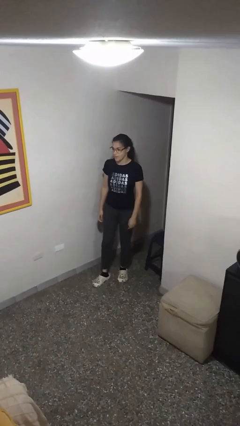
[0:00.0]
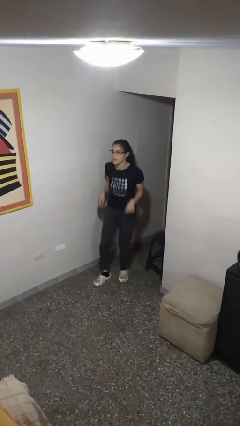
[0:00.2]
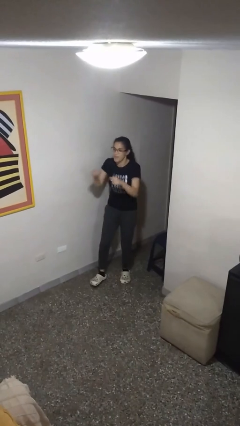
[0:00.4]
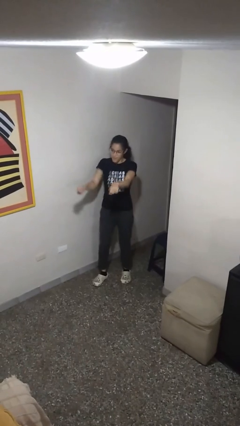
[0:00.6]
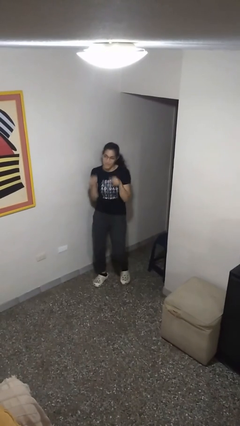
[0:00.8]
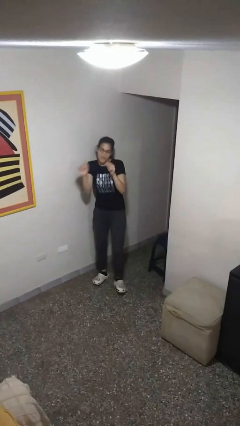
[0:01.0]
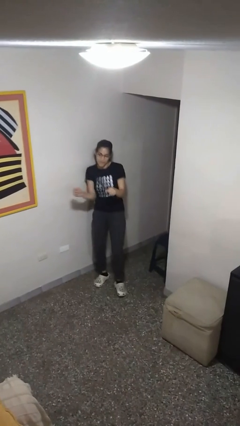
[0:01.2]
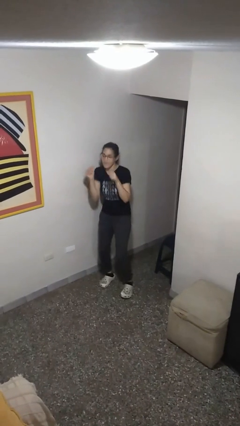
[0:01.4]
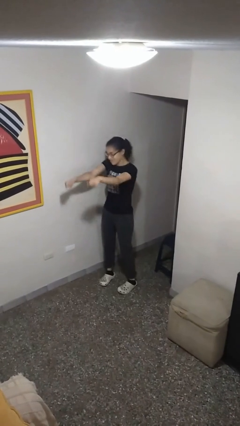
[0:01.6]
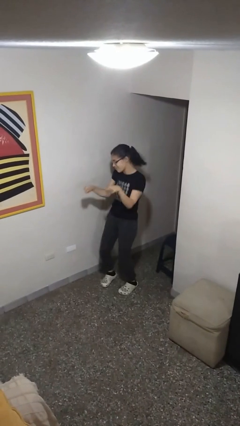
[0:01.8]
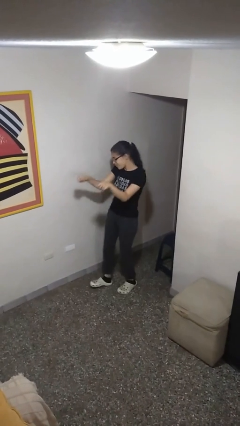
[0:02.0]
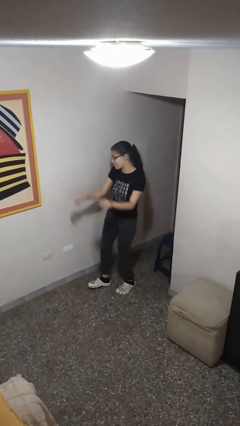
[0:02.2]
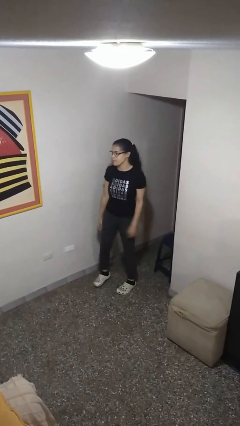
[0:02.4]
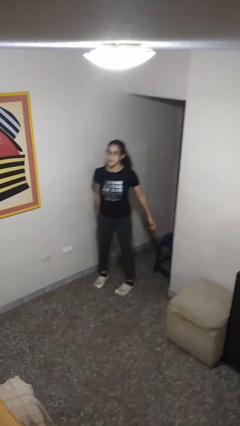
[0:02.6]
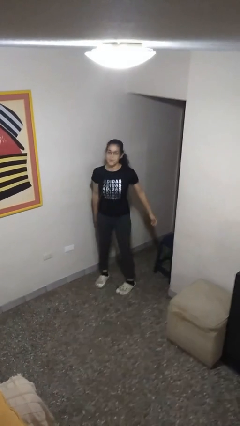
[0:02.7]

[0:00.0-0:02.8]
person dances in place

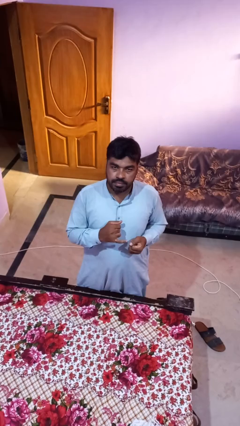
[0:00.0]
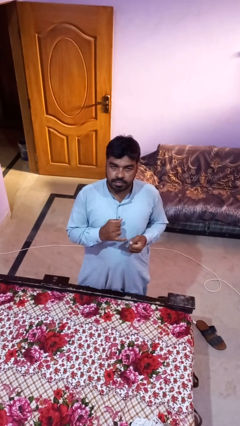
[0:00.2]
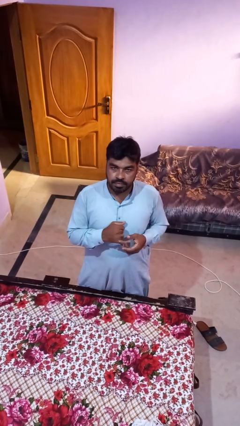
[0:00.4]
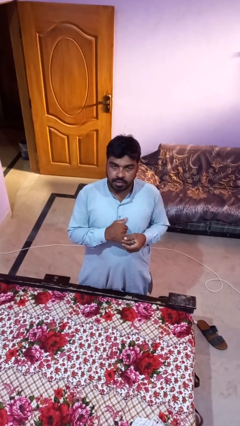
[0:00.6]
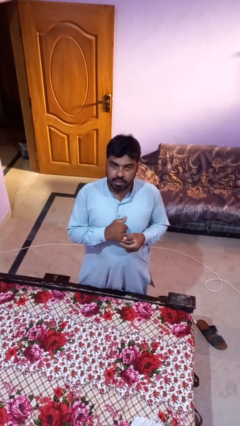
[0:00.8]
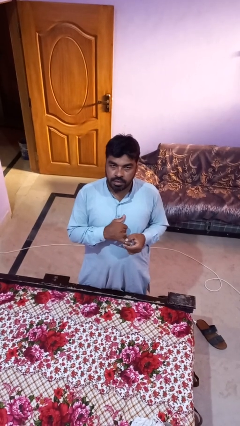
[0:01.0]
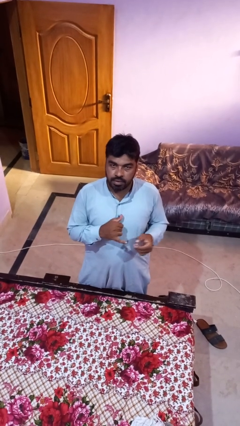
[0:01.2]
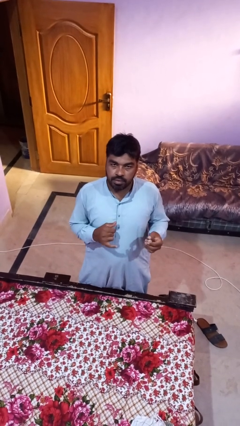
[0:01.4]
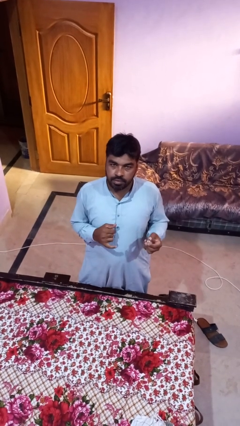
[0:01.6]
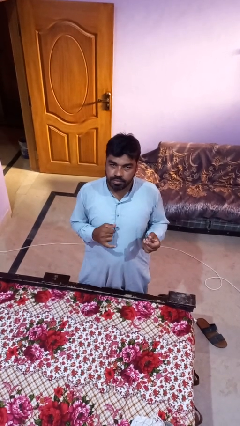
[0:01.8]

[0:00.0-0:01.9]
person takes off ring

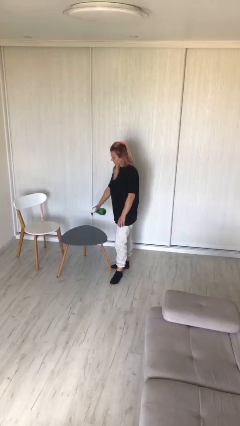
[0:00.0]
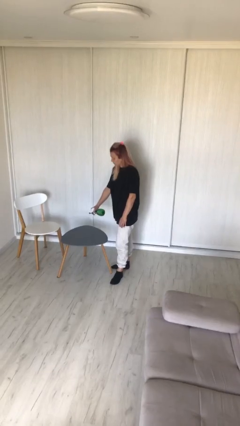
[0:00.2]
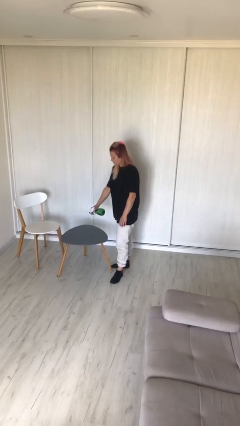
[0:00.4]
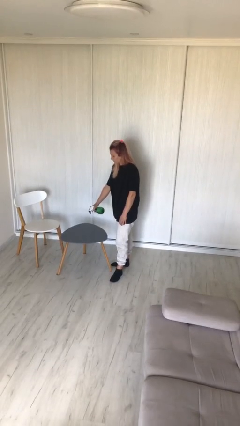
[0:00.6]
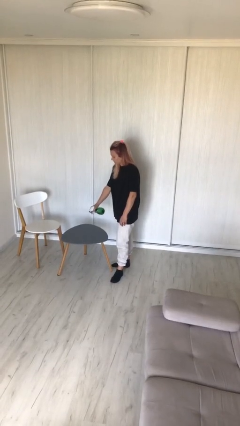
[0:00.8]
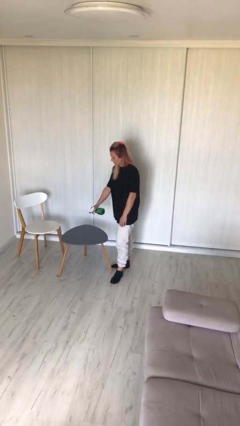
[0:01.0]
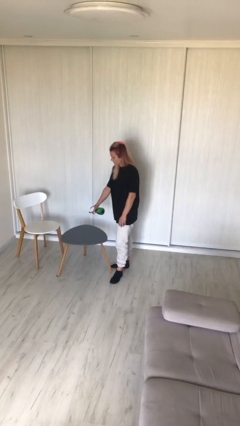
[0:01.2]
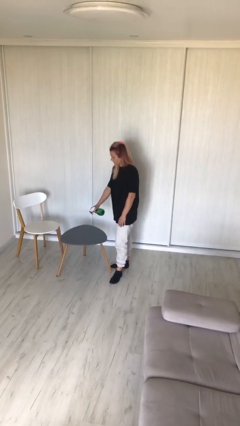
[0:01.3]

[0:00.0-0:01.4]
person sprays from bottle

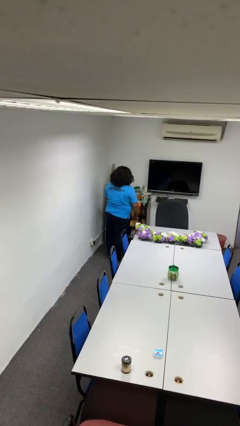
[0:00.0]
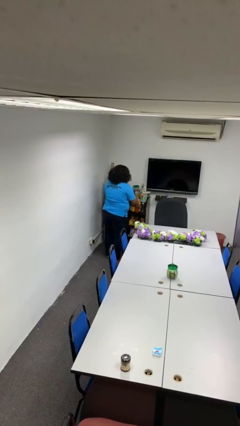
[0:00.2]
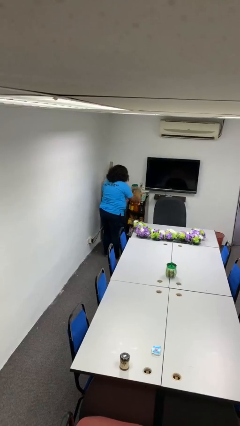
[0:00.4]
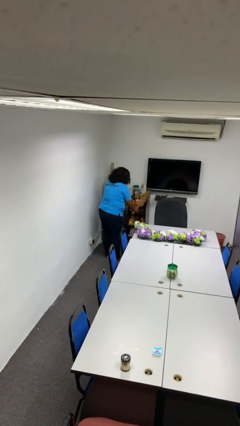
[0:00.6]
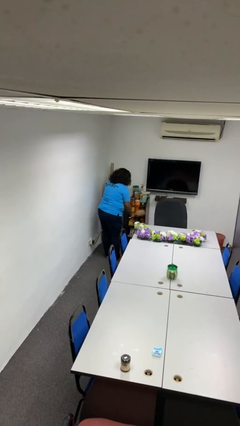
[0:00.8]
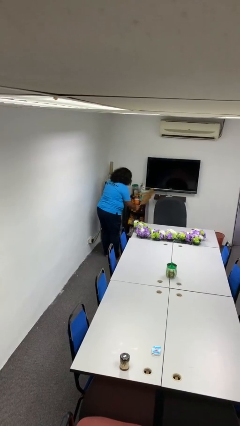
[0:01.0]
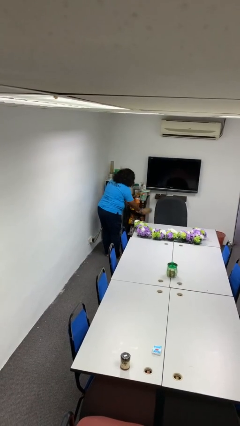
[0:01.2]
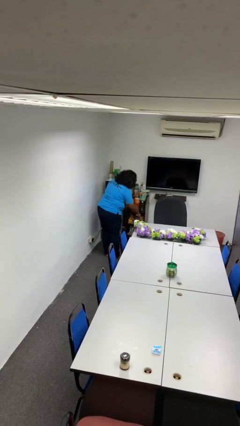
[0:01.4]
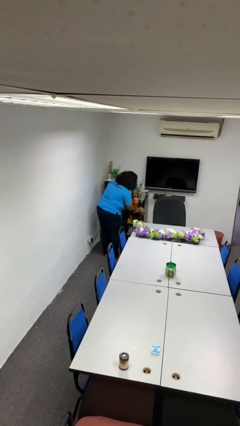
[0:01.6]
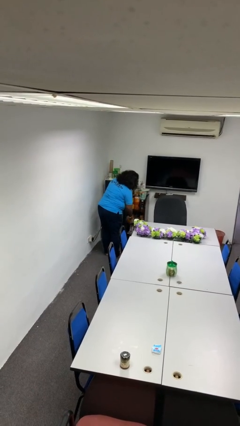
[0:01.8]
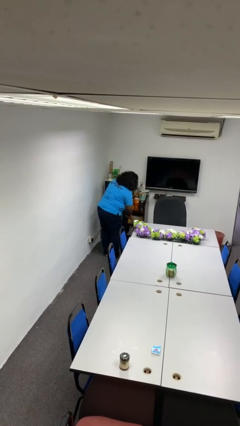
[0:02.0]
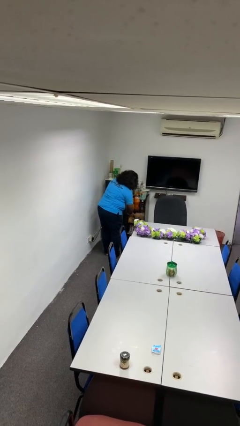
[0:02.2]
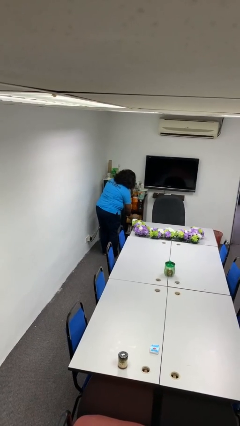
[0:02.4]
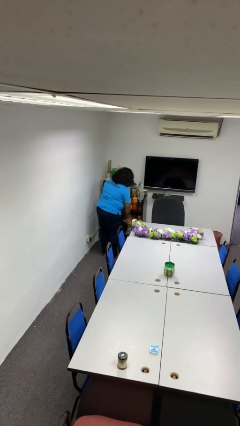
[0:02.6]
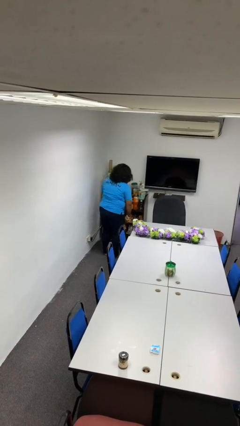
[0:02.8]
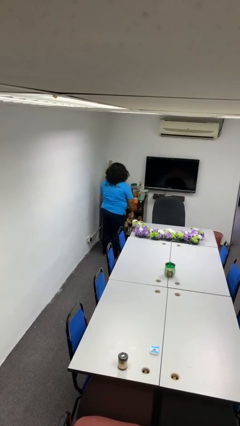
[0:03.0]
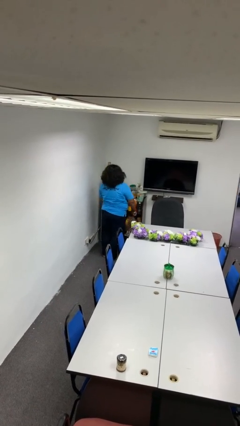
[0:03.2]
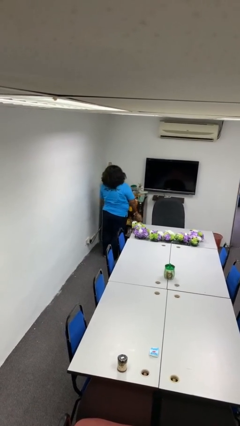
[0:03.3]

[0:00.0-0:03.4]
person dusts furniture

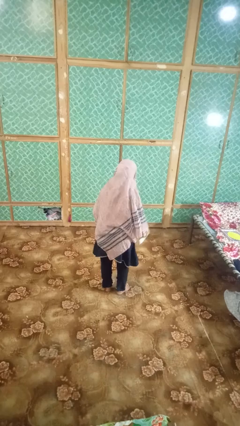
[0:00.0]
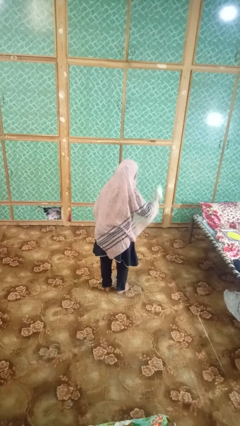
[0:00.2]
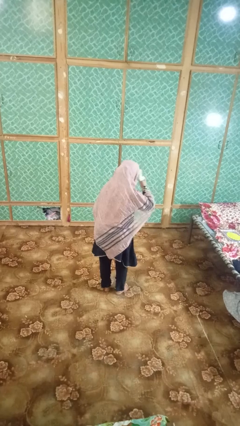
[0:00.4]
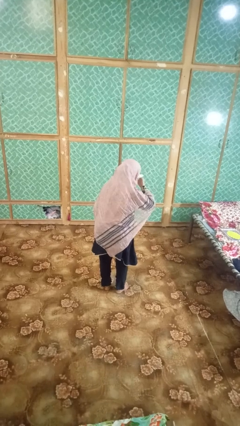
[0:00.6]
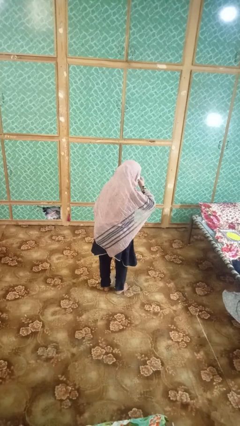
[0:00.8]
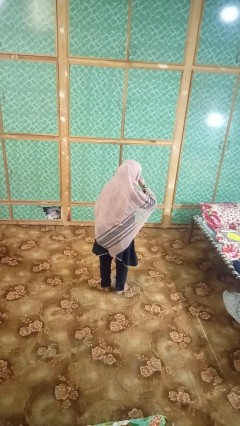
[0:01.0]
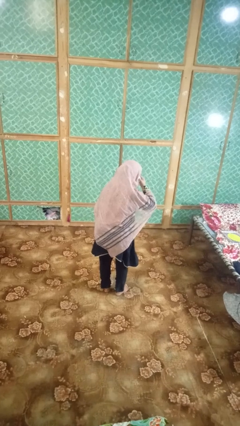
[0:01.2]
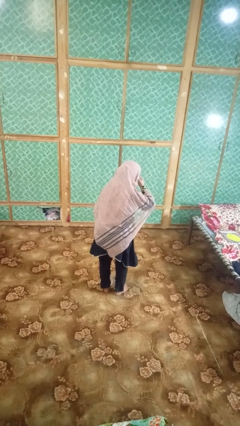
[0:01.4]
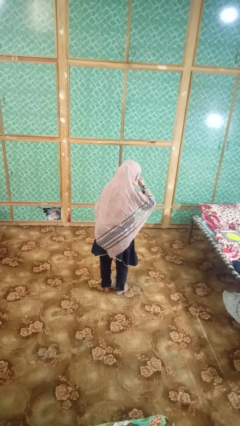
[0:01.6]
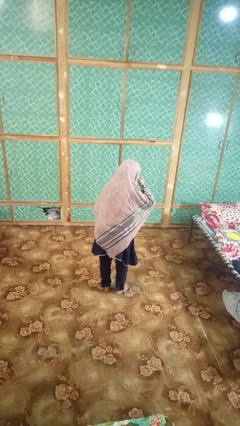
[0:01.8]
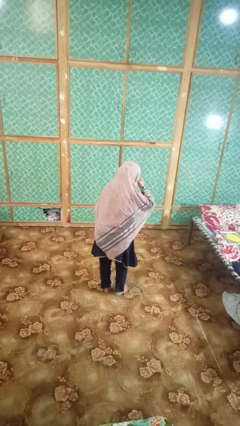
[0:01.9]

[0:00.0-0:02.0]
person blows nose

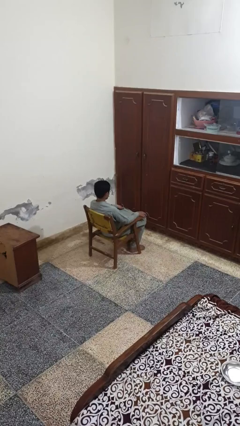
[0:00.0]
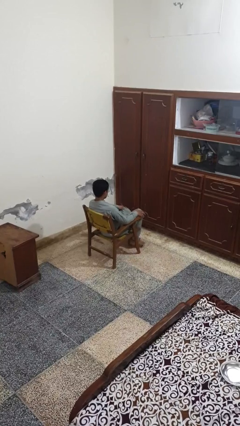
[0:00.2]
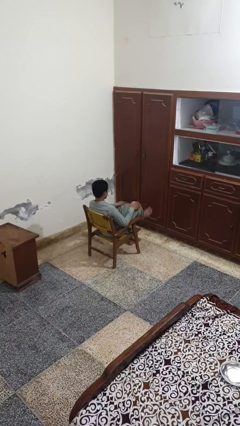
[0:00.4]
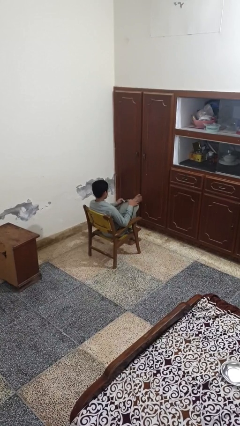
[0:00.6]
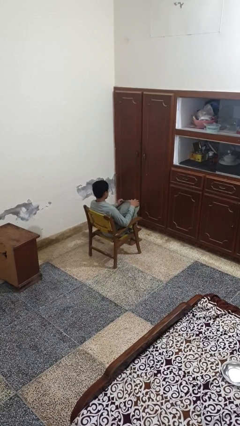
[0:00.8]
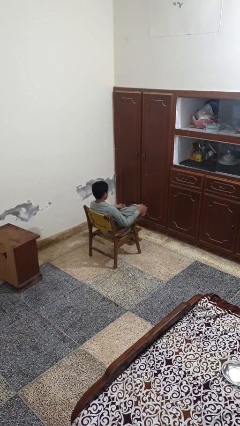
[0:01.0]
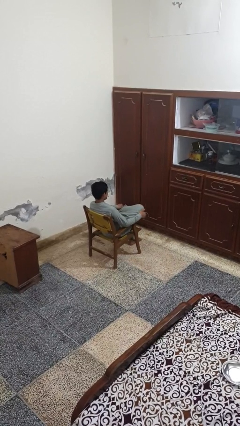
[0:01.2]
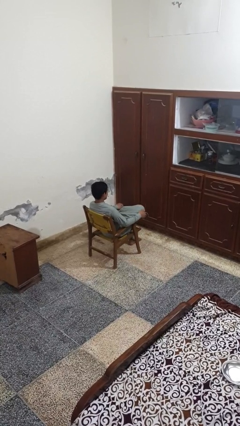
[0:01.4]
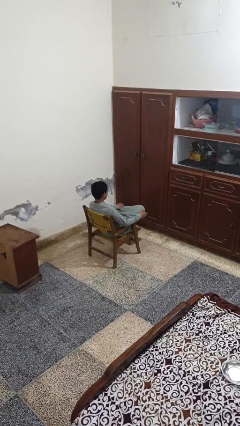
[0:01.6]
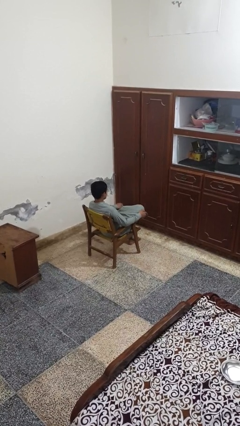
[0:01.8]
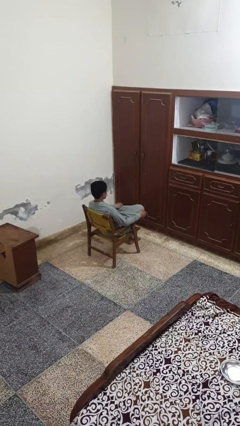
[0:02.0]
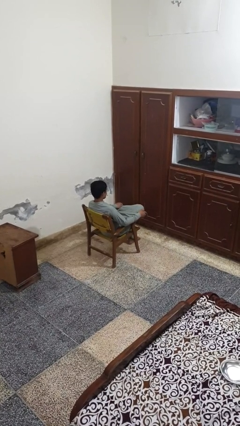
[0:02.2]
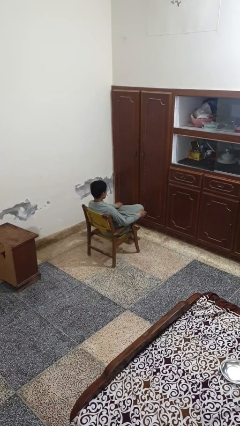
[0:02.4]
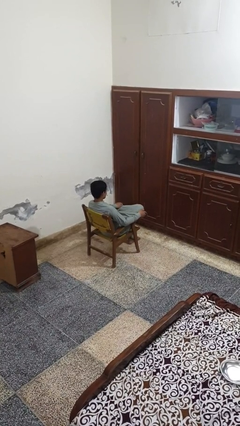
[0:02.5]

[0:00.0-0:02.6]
person crosses legs

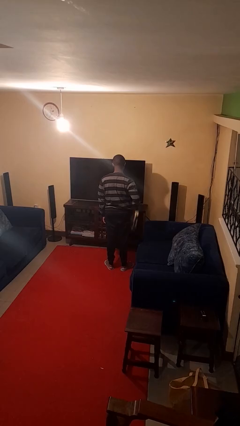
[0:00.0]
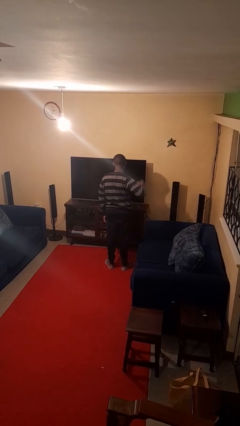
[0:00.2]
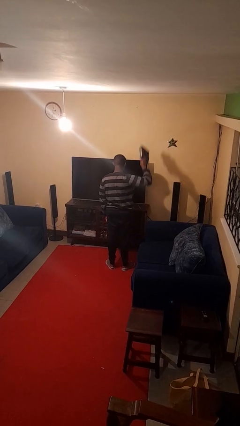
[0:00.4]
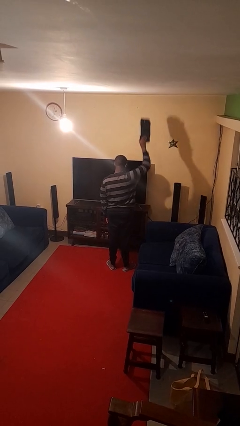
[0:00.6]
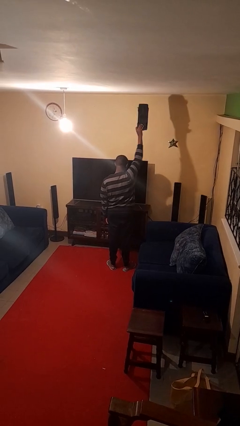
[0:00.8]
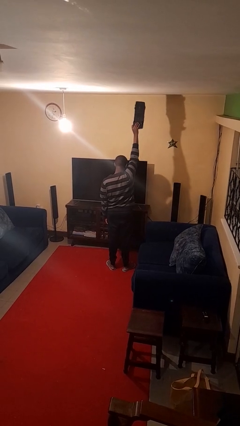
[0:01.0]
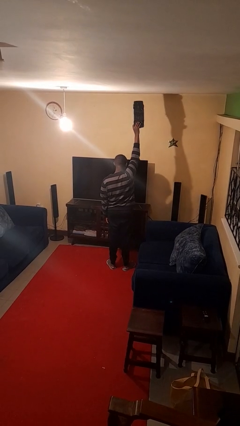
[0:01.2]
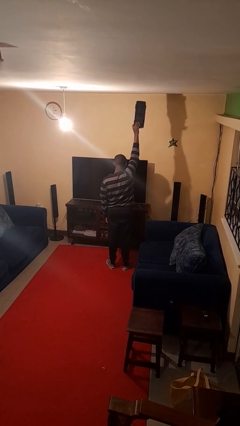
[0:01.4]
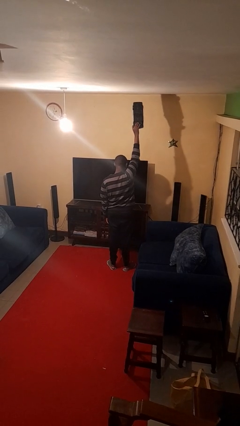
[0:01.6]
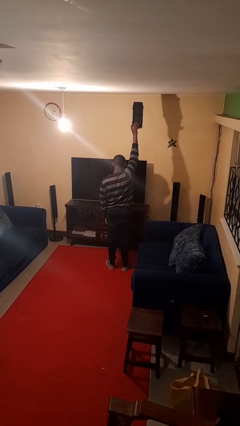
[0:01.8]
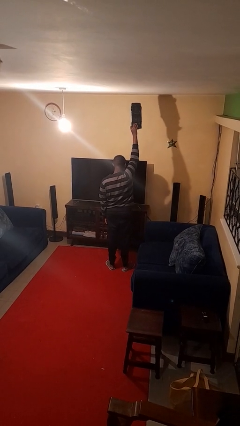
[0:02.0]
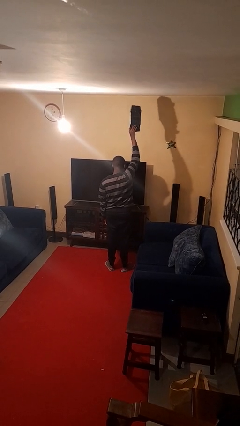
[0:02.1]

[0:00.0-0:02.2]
person holds object above head

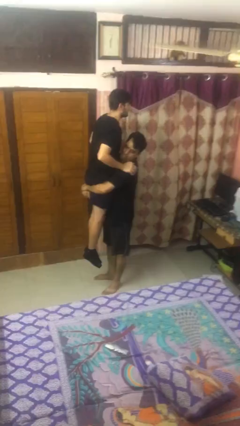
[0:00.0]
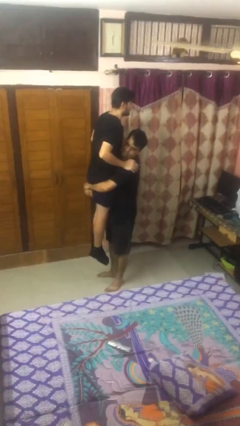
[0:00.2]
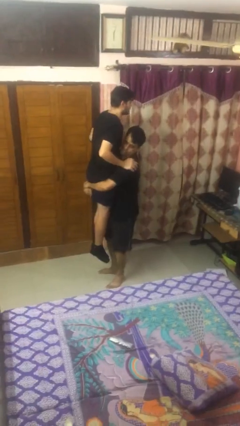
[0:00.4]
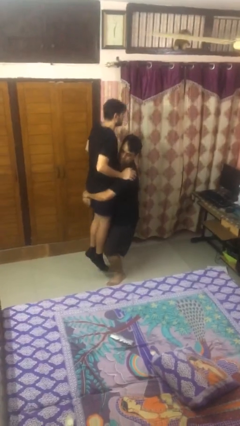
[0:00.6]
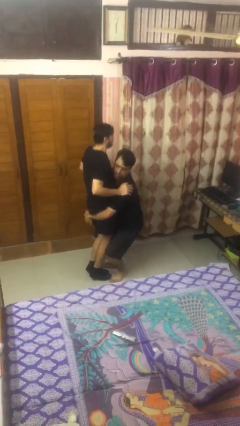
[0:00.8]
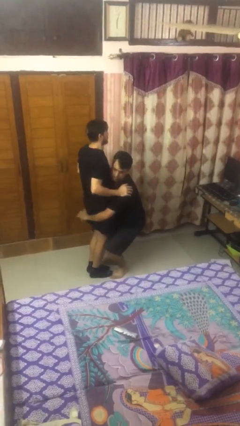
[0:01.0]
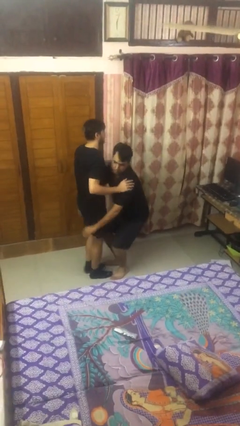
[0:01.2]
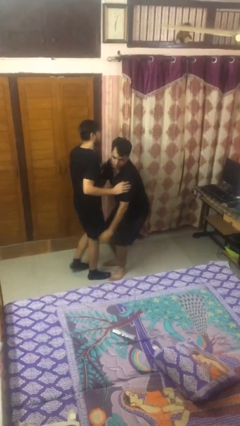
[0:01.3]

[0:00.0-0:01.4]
person puts down person
